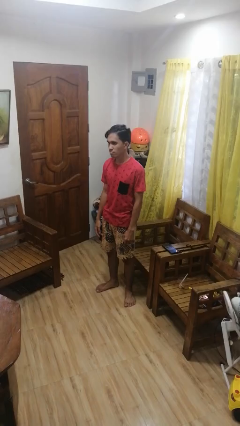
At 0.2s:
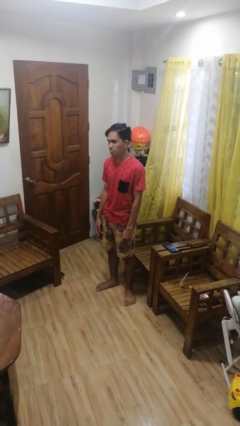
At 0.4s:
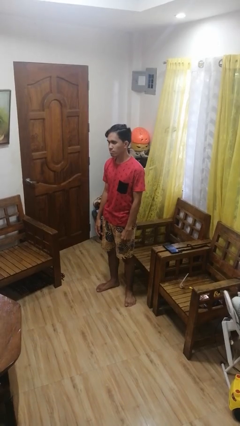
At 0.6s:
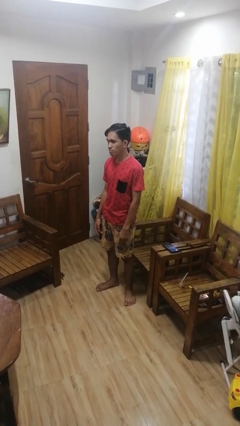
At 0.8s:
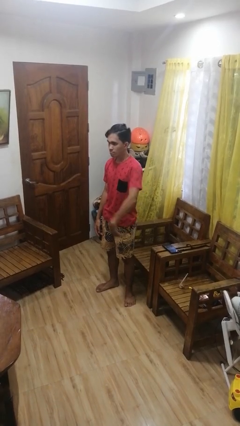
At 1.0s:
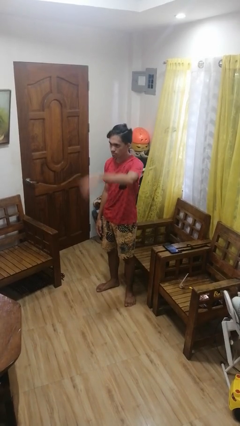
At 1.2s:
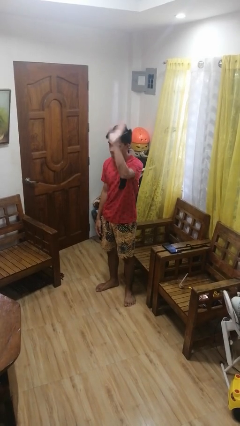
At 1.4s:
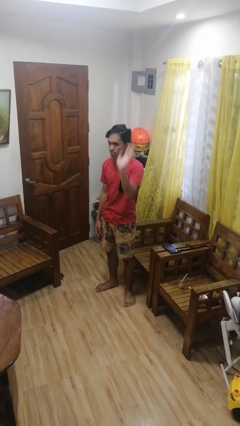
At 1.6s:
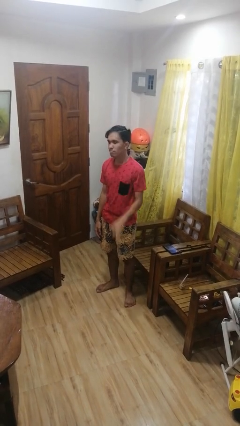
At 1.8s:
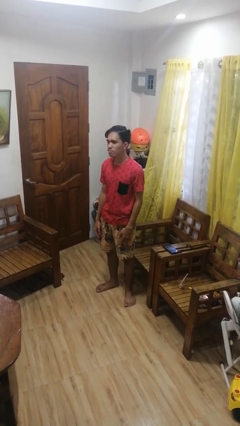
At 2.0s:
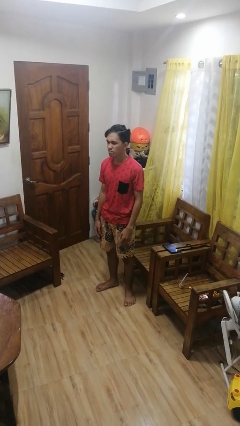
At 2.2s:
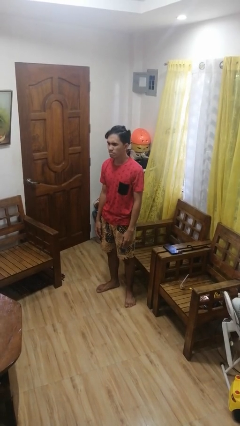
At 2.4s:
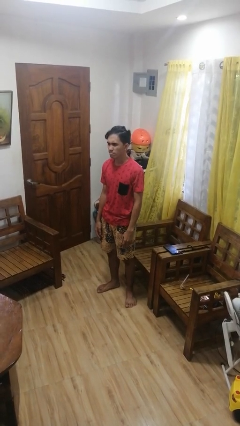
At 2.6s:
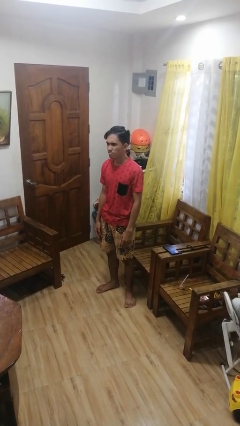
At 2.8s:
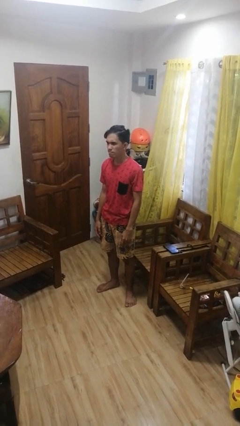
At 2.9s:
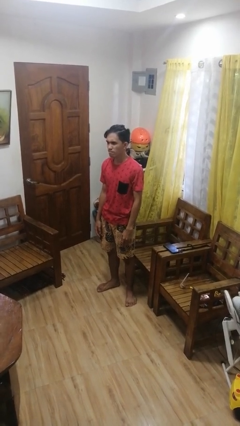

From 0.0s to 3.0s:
person gestures swipe up

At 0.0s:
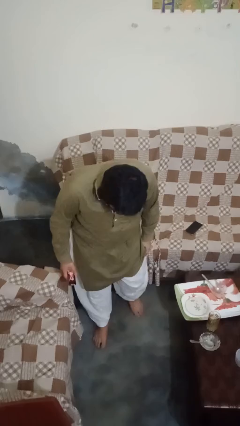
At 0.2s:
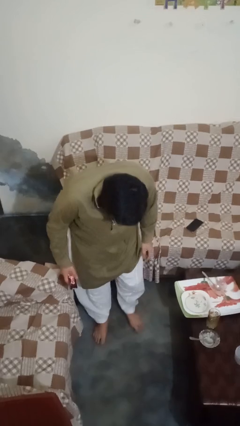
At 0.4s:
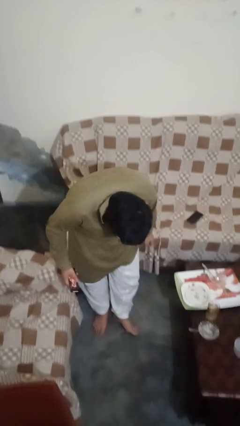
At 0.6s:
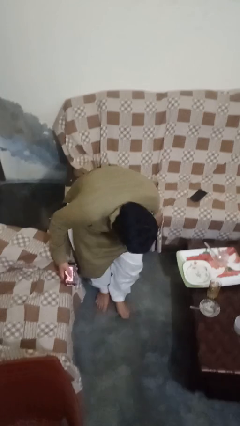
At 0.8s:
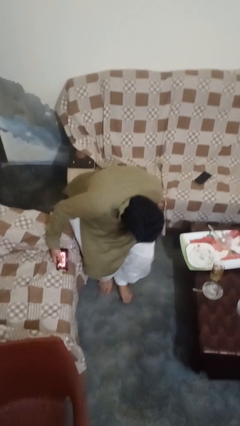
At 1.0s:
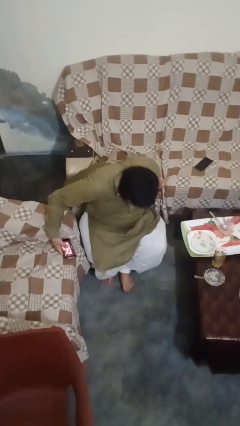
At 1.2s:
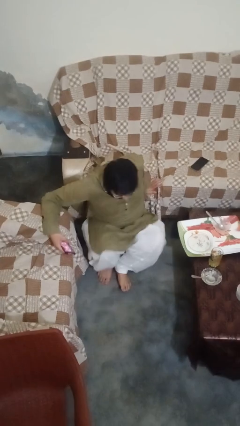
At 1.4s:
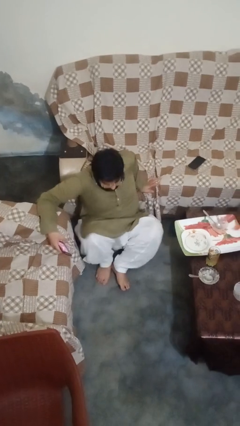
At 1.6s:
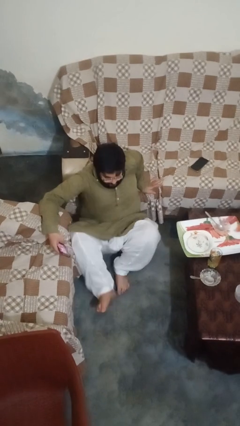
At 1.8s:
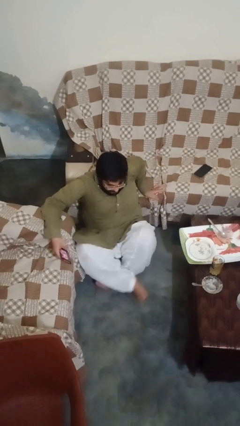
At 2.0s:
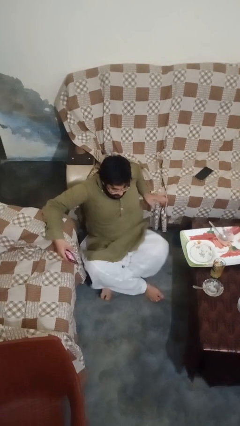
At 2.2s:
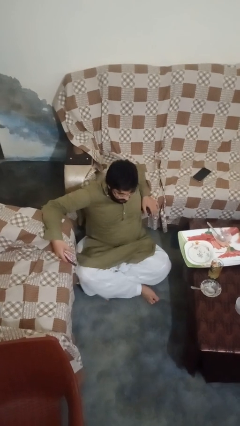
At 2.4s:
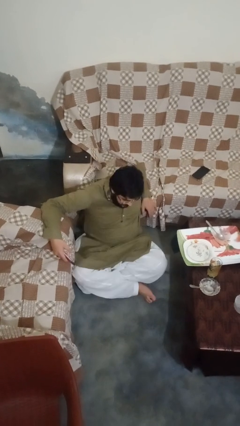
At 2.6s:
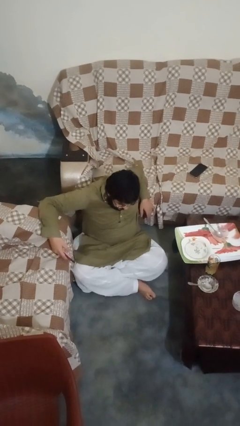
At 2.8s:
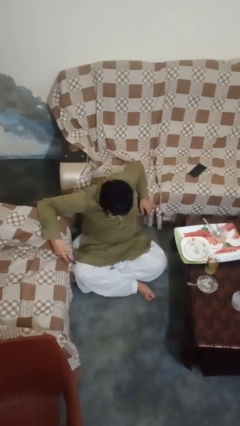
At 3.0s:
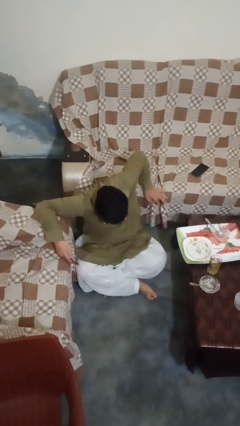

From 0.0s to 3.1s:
person sits crisscross

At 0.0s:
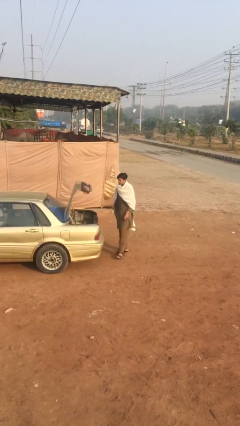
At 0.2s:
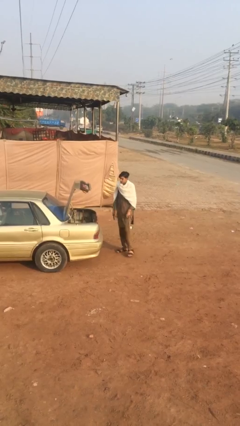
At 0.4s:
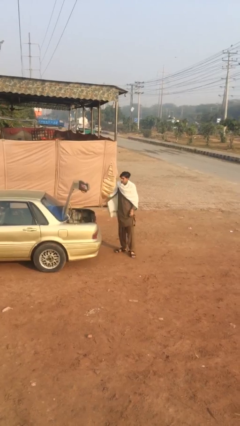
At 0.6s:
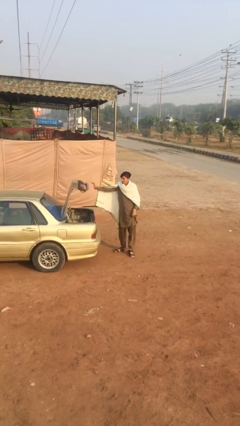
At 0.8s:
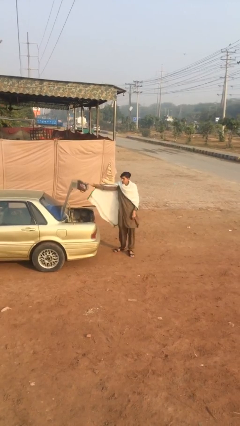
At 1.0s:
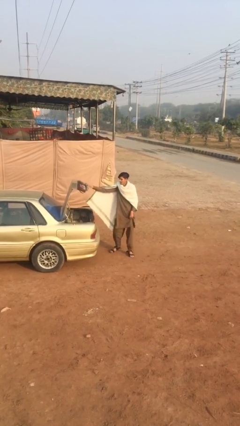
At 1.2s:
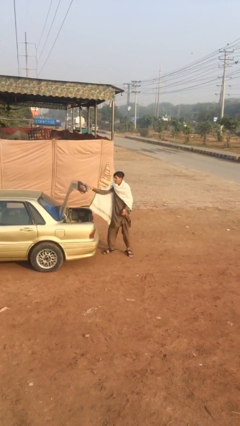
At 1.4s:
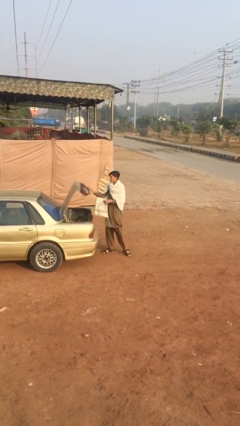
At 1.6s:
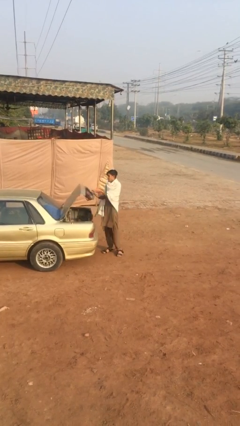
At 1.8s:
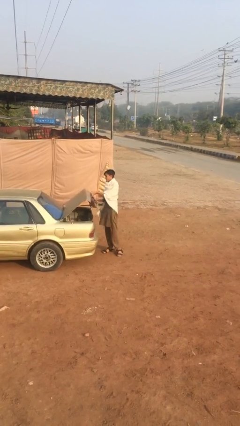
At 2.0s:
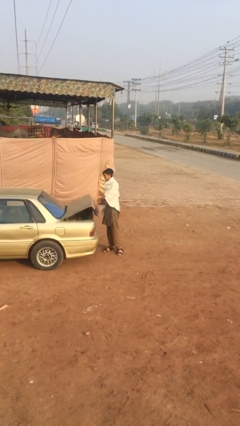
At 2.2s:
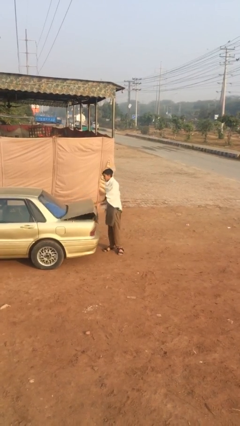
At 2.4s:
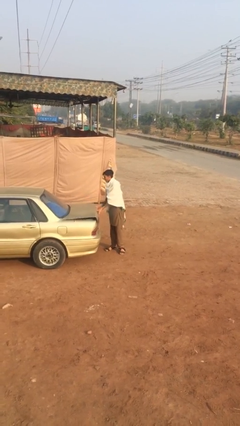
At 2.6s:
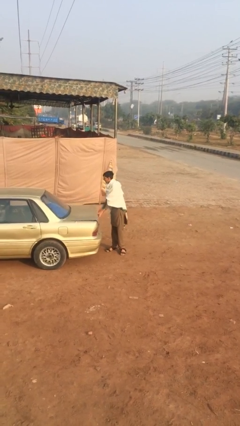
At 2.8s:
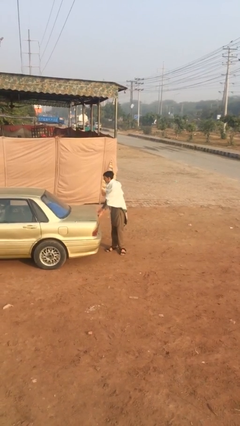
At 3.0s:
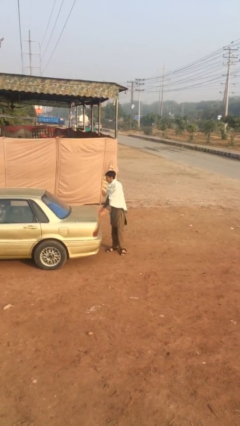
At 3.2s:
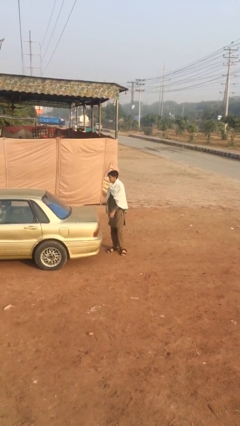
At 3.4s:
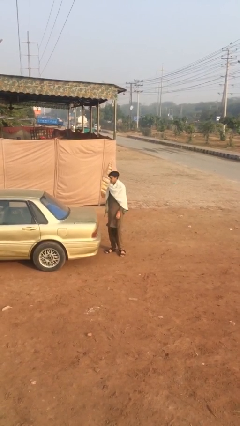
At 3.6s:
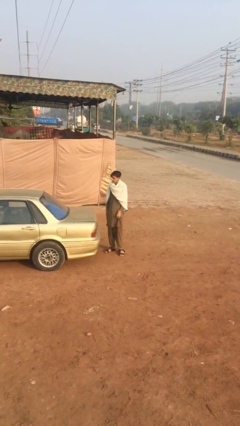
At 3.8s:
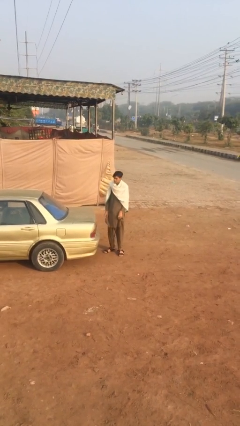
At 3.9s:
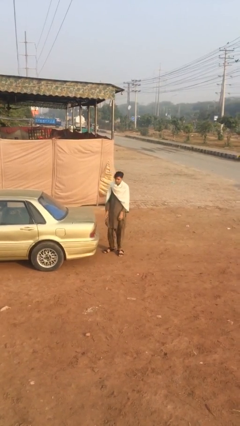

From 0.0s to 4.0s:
person closes car trunk

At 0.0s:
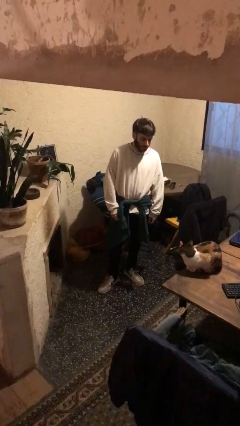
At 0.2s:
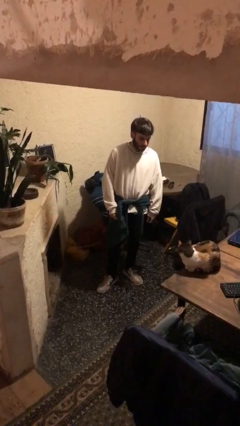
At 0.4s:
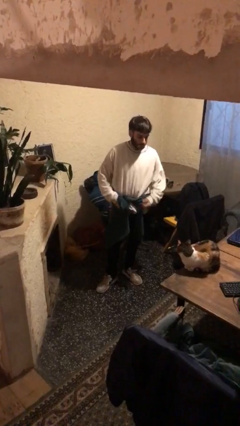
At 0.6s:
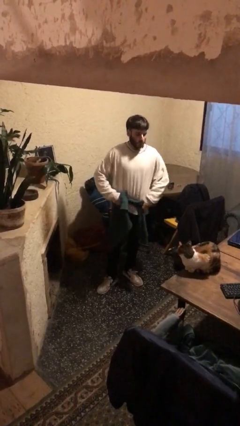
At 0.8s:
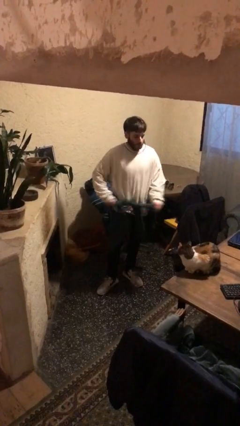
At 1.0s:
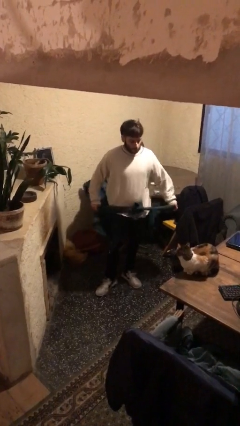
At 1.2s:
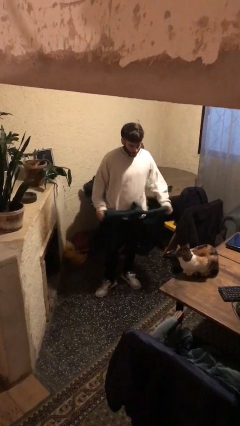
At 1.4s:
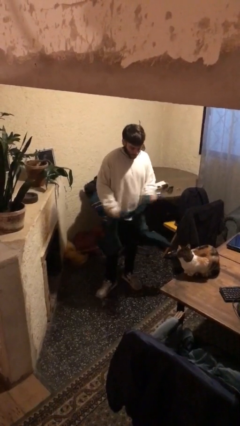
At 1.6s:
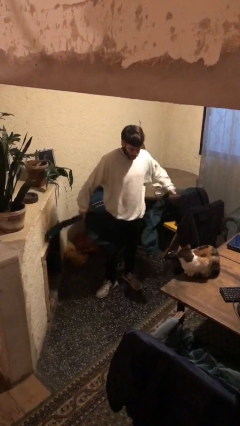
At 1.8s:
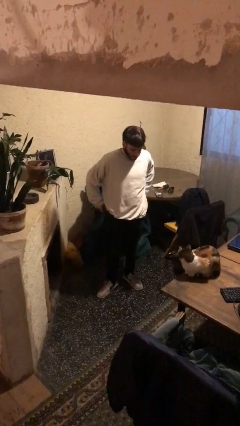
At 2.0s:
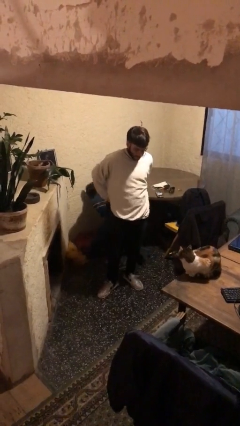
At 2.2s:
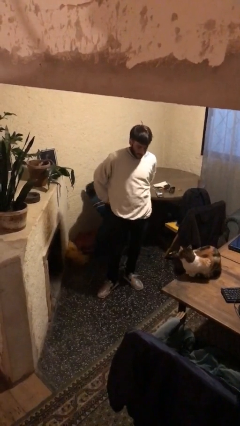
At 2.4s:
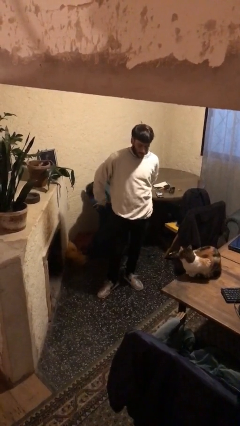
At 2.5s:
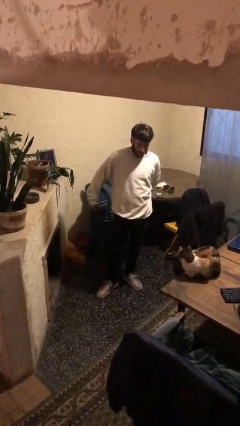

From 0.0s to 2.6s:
person unties jacket around waist

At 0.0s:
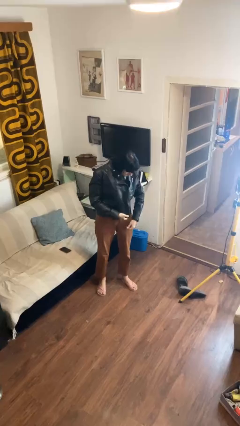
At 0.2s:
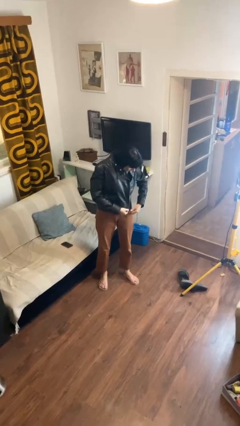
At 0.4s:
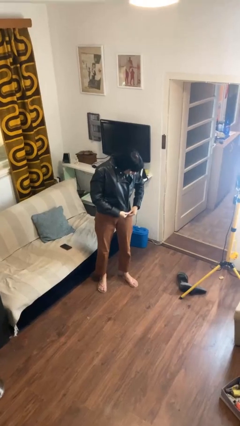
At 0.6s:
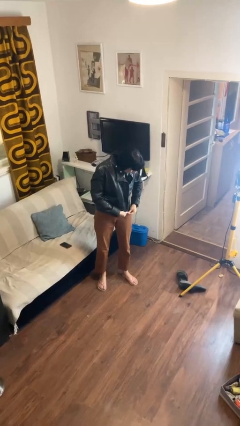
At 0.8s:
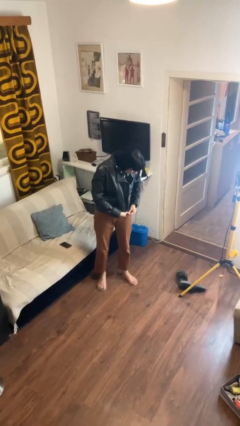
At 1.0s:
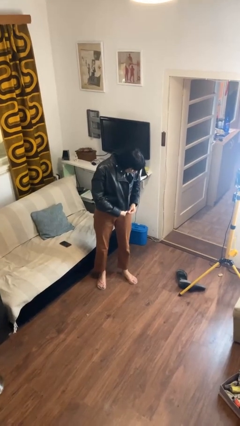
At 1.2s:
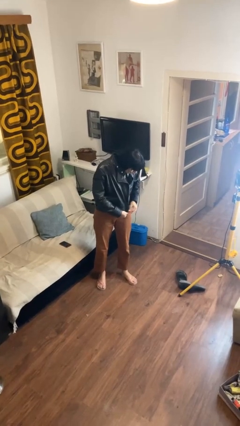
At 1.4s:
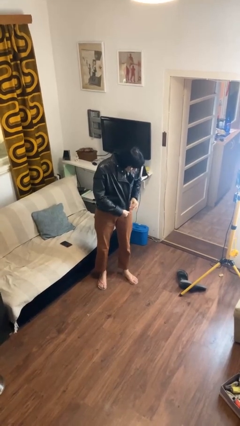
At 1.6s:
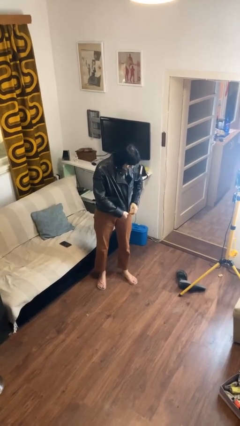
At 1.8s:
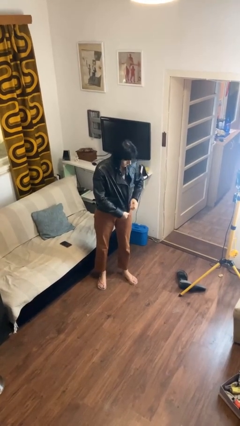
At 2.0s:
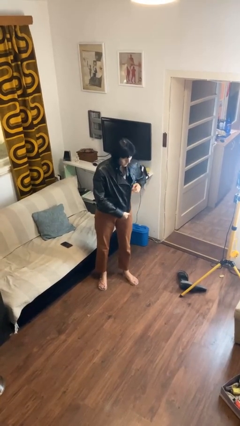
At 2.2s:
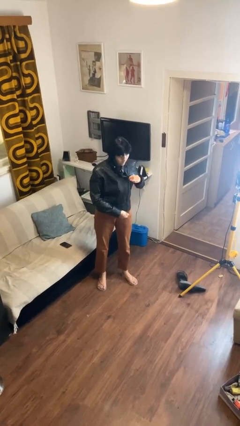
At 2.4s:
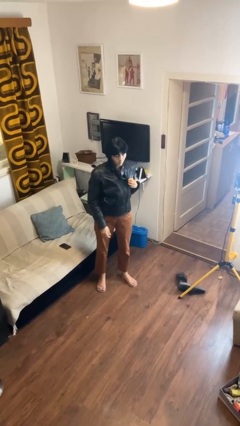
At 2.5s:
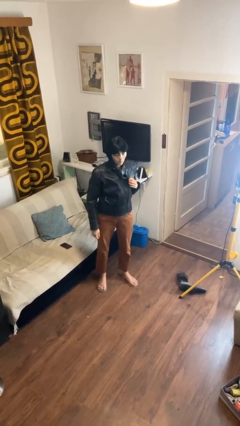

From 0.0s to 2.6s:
person zips up jacket

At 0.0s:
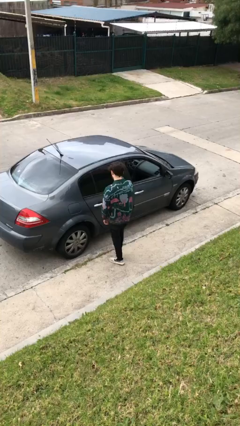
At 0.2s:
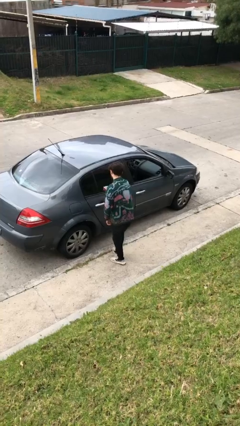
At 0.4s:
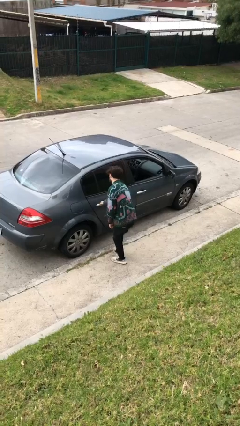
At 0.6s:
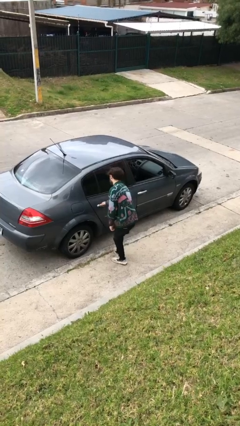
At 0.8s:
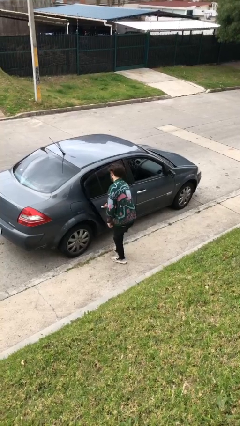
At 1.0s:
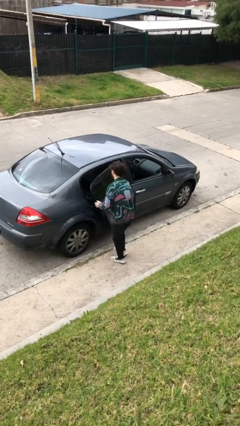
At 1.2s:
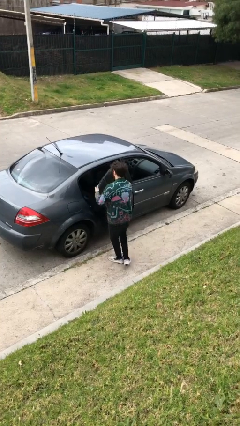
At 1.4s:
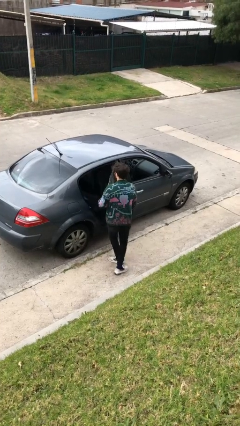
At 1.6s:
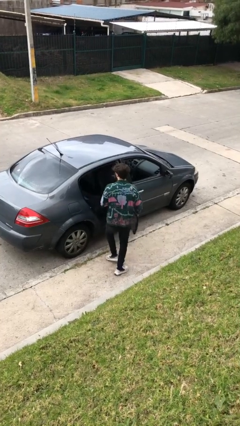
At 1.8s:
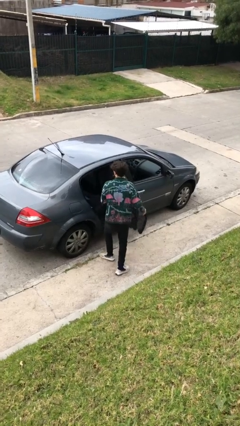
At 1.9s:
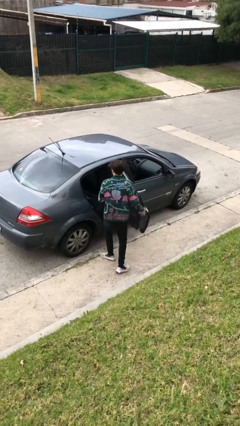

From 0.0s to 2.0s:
person opens car door

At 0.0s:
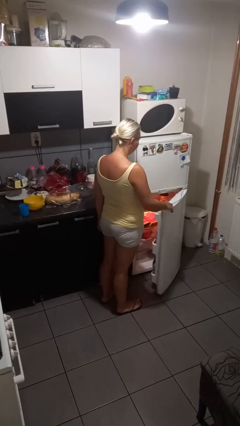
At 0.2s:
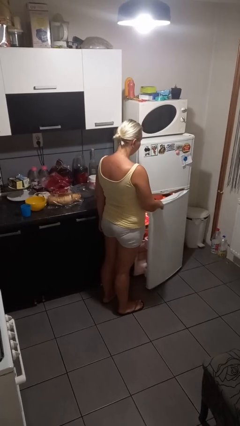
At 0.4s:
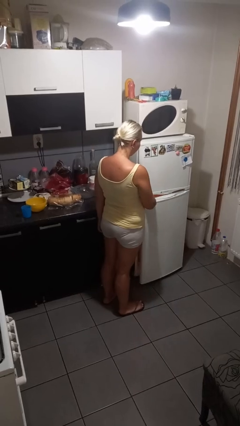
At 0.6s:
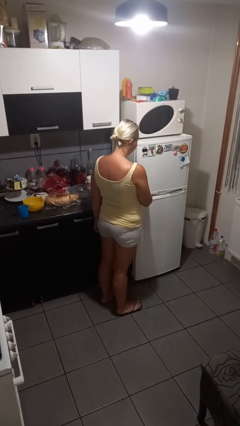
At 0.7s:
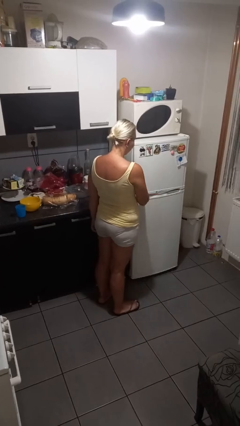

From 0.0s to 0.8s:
person closes refrigerator
